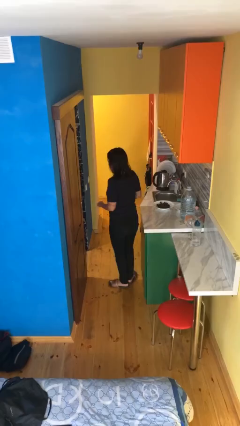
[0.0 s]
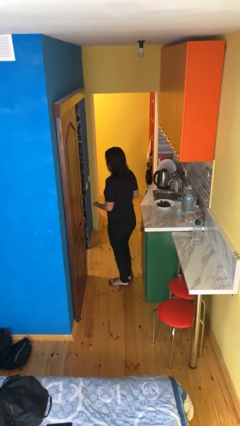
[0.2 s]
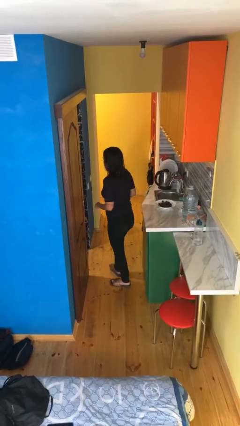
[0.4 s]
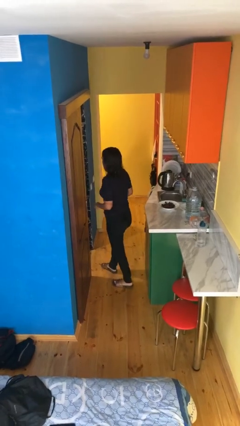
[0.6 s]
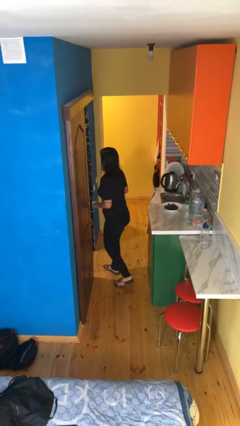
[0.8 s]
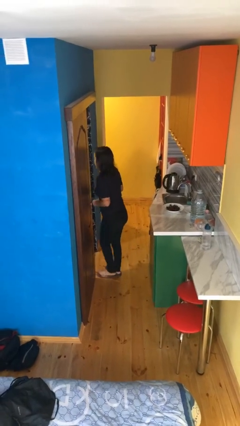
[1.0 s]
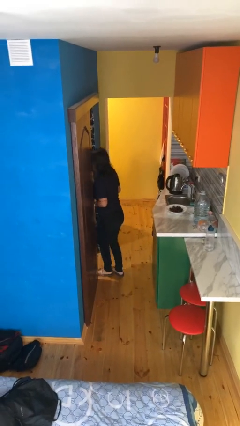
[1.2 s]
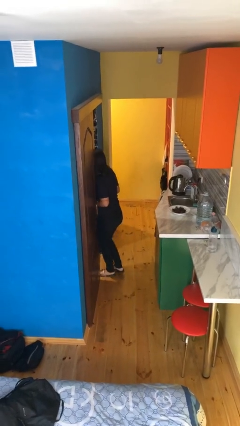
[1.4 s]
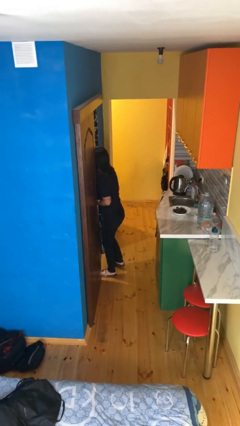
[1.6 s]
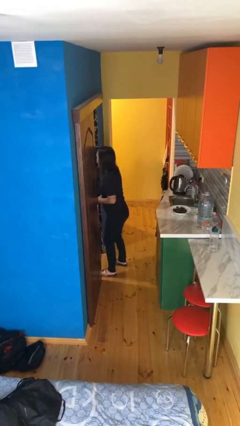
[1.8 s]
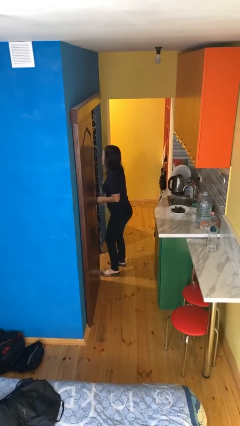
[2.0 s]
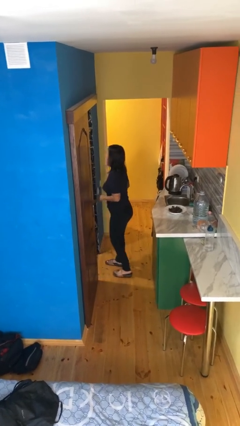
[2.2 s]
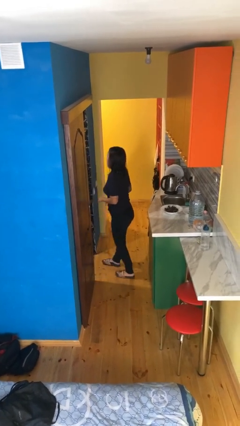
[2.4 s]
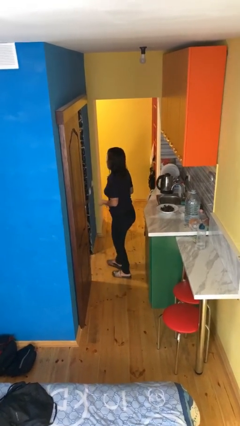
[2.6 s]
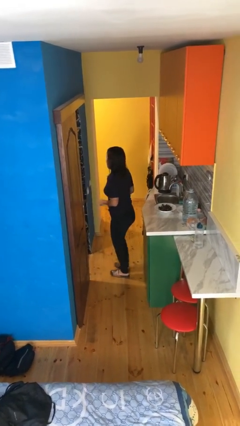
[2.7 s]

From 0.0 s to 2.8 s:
person bumps into wall

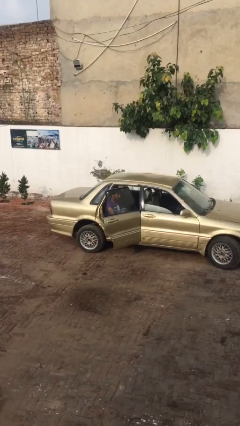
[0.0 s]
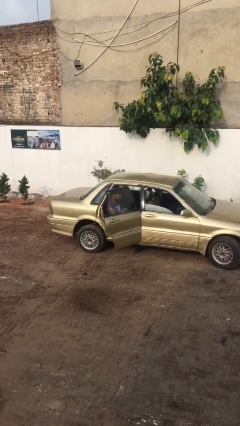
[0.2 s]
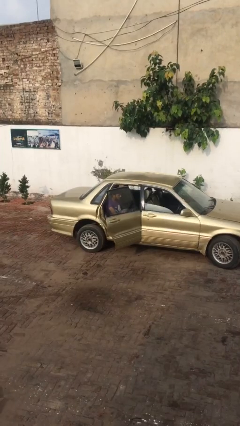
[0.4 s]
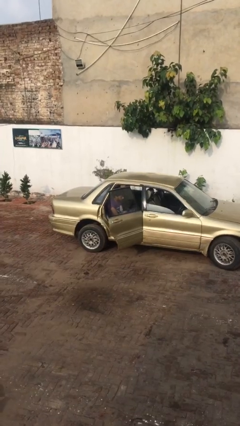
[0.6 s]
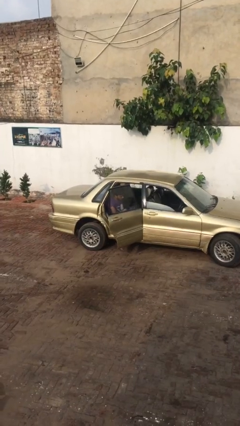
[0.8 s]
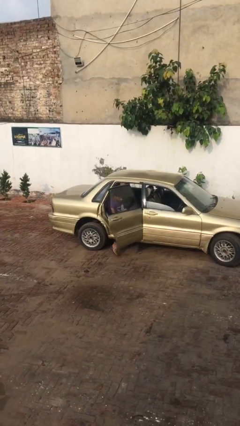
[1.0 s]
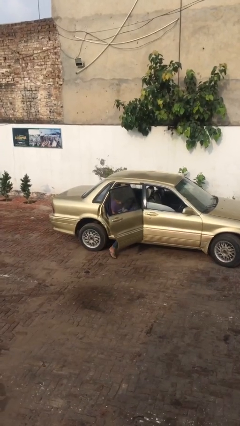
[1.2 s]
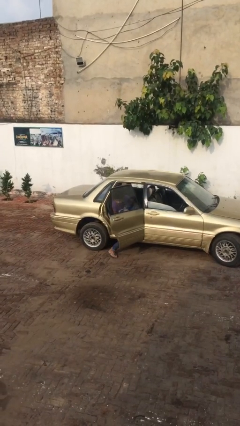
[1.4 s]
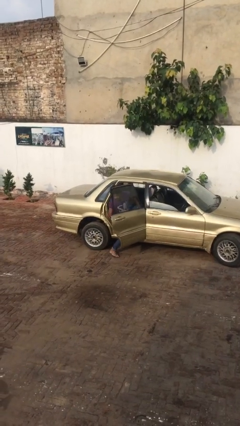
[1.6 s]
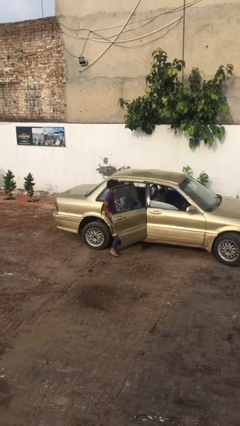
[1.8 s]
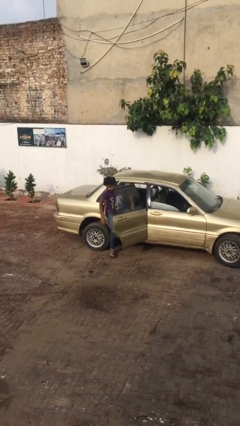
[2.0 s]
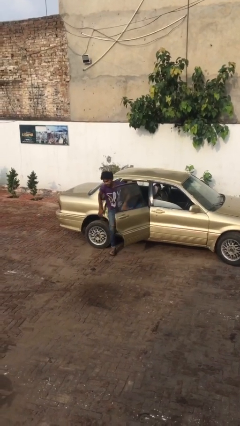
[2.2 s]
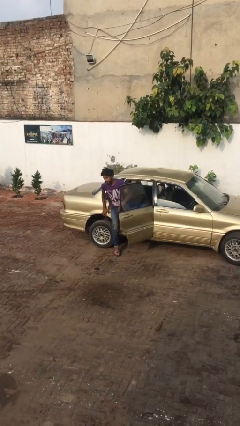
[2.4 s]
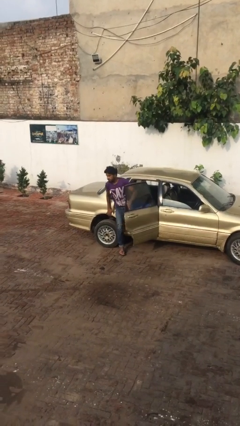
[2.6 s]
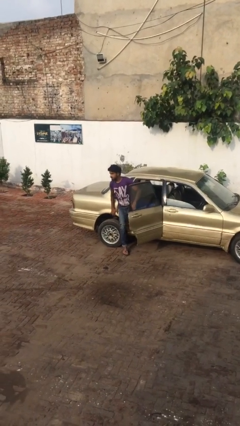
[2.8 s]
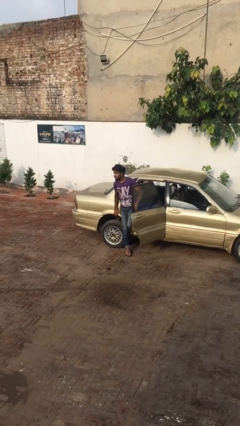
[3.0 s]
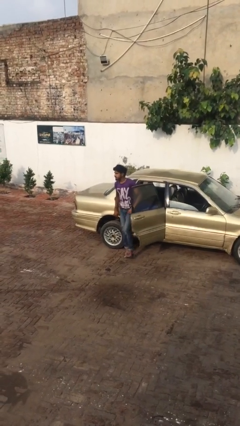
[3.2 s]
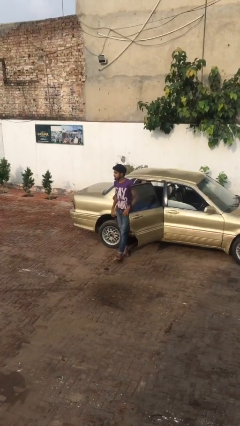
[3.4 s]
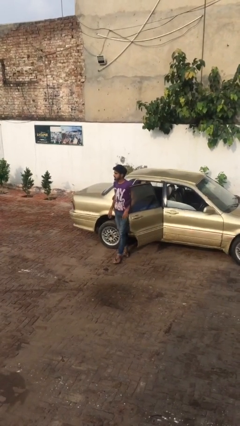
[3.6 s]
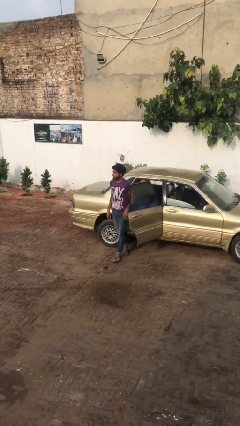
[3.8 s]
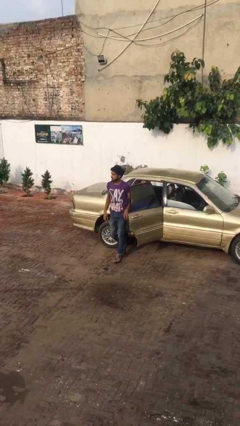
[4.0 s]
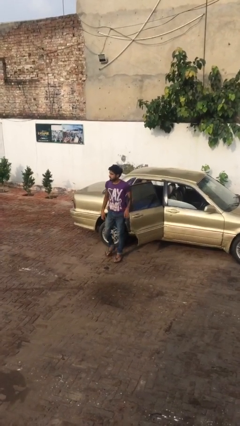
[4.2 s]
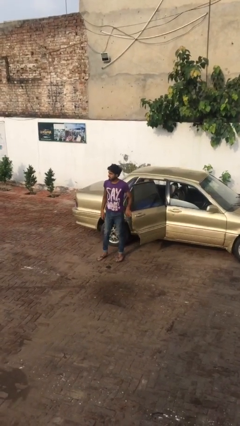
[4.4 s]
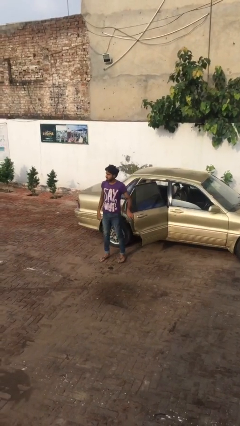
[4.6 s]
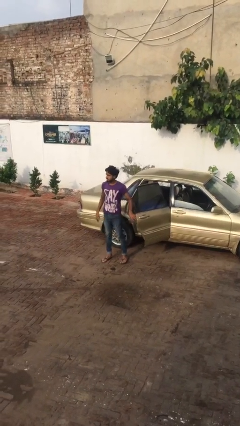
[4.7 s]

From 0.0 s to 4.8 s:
person exits car

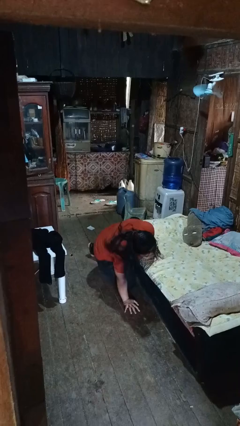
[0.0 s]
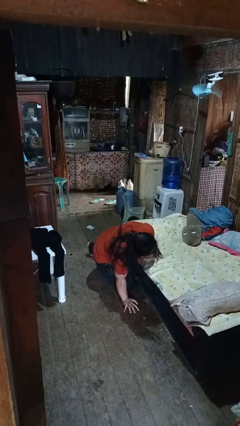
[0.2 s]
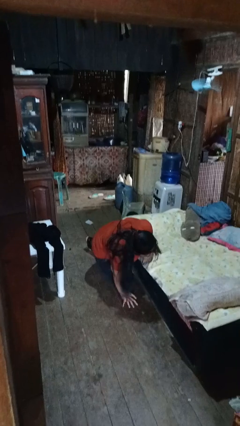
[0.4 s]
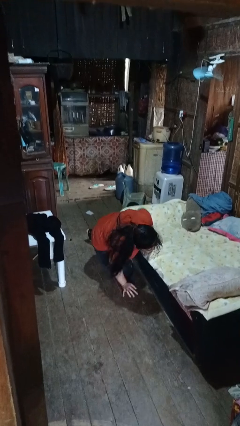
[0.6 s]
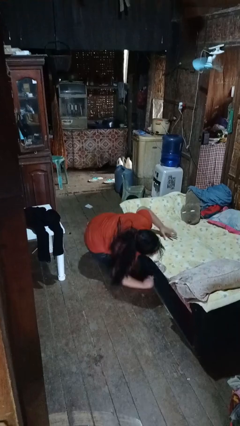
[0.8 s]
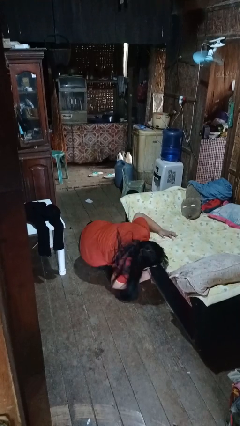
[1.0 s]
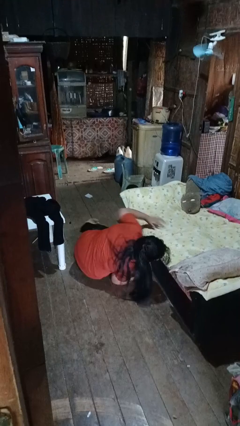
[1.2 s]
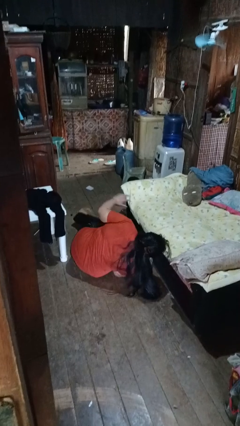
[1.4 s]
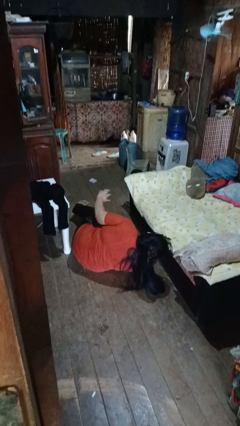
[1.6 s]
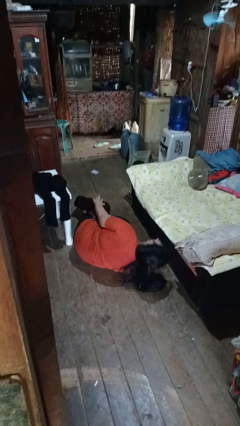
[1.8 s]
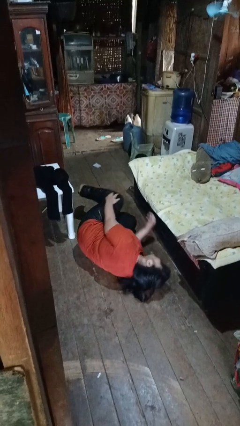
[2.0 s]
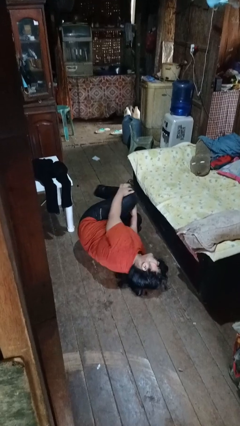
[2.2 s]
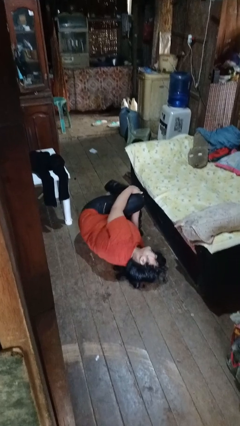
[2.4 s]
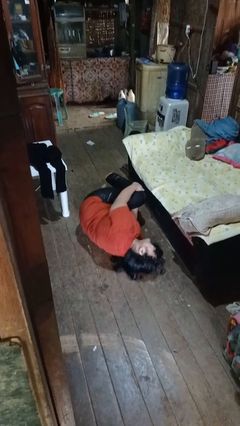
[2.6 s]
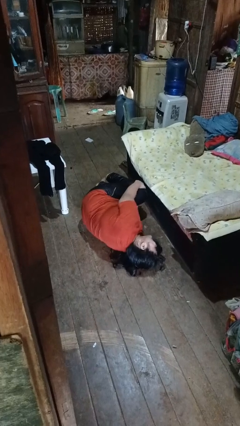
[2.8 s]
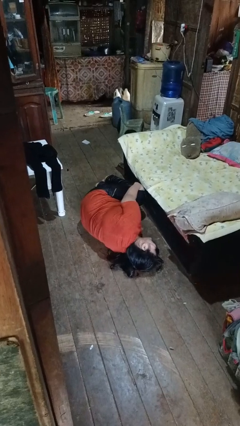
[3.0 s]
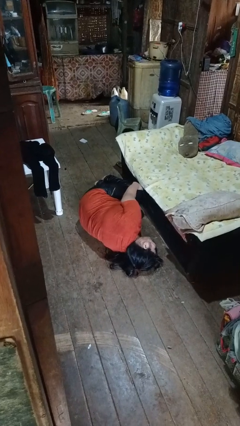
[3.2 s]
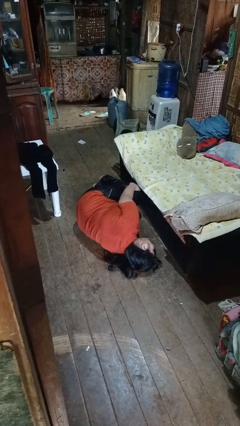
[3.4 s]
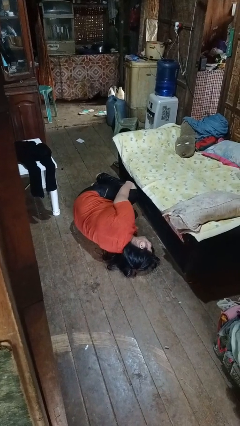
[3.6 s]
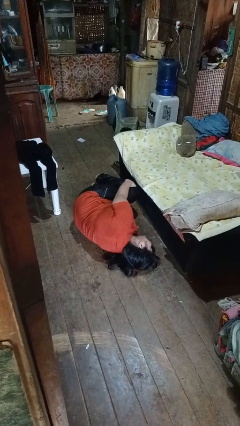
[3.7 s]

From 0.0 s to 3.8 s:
person lies down on floor

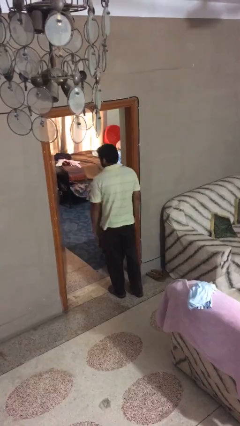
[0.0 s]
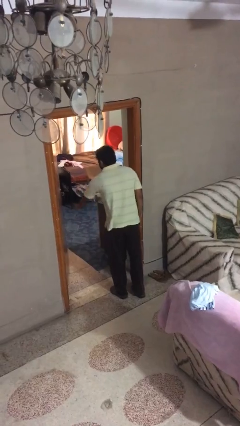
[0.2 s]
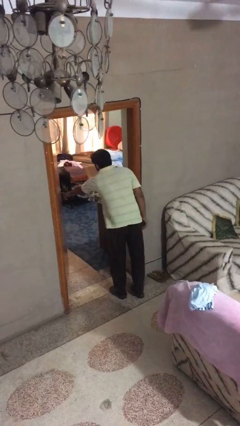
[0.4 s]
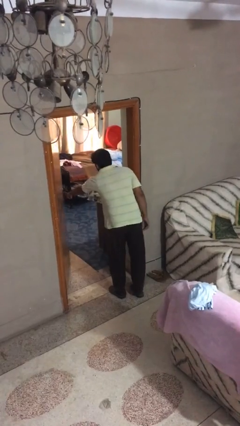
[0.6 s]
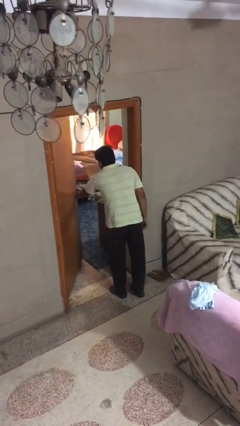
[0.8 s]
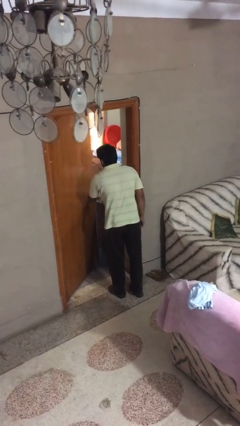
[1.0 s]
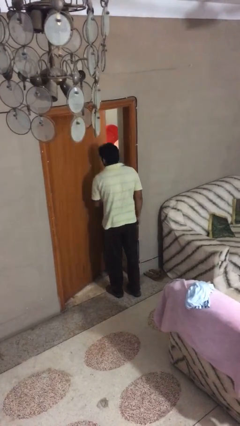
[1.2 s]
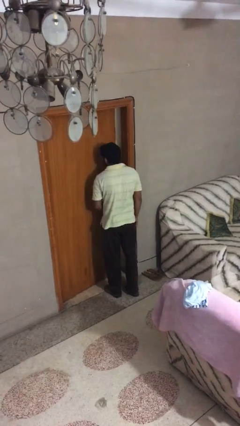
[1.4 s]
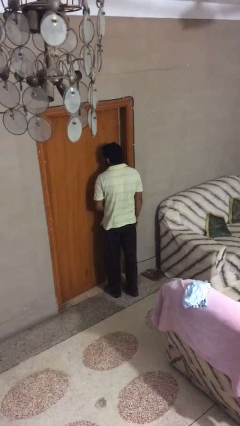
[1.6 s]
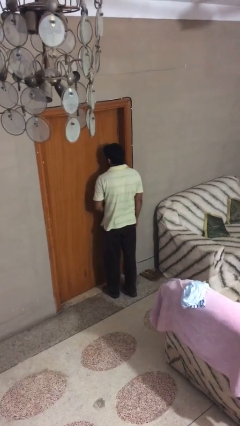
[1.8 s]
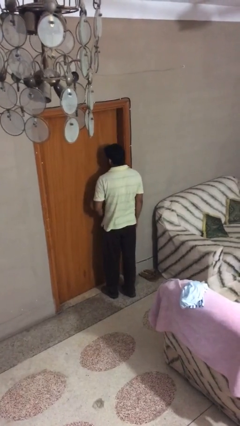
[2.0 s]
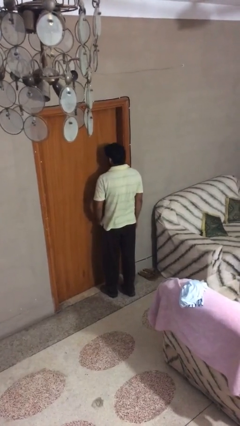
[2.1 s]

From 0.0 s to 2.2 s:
person closes facility door

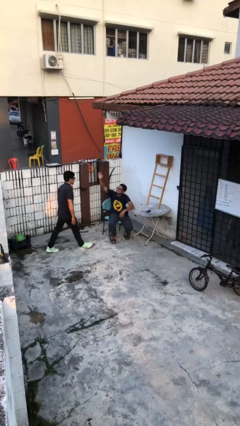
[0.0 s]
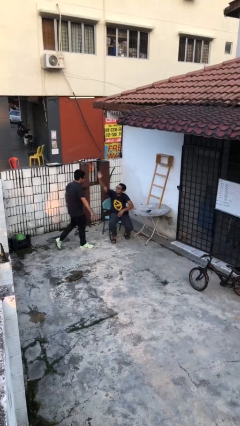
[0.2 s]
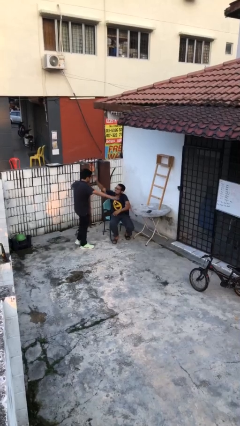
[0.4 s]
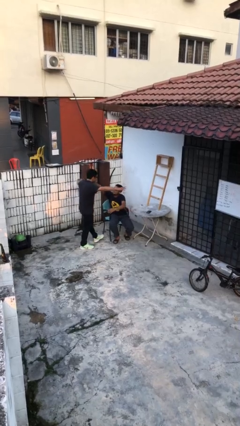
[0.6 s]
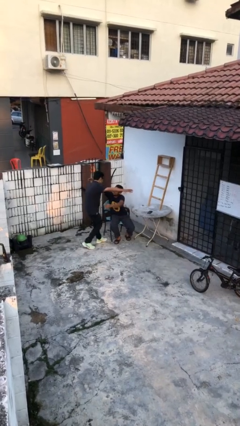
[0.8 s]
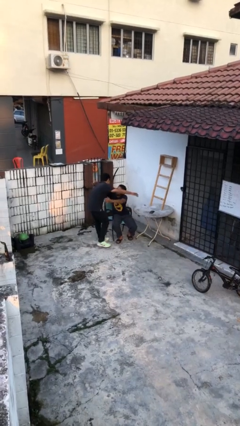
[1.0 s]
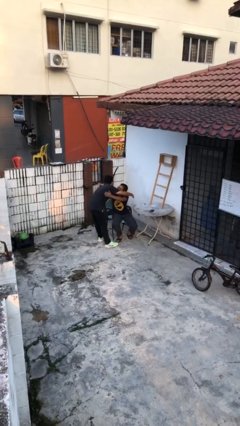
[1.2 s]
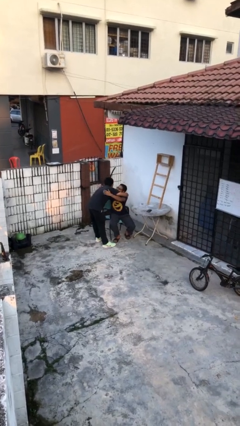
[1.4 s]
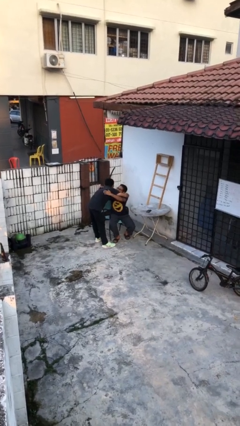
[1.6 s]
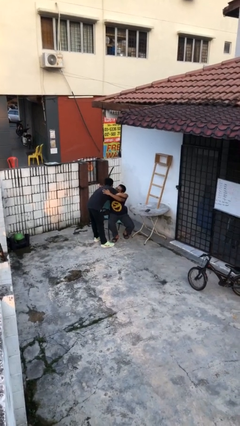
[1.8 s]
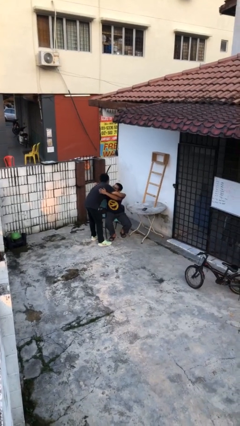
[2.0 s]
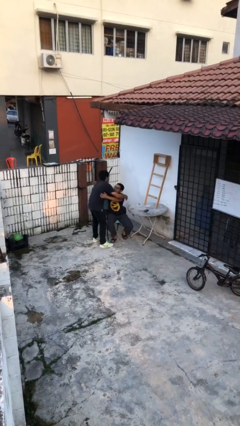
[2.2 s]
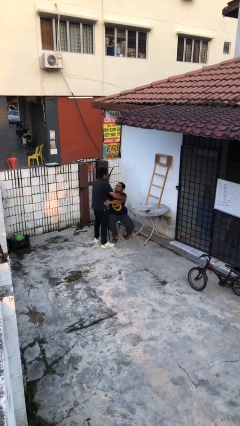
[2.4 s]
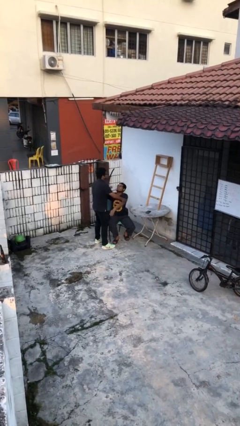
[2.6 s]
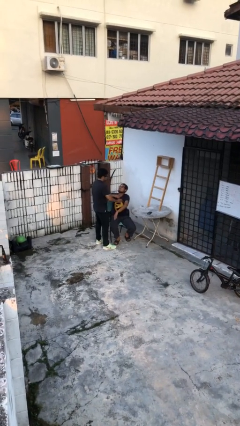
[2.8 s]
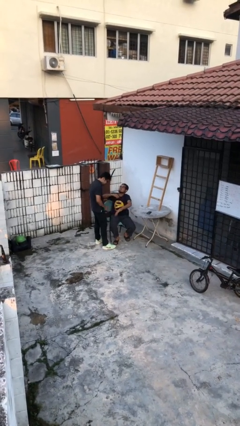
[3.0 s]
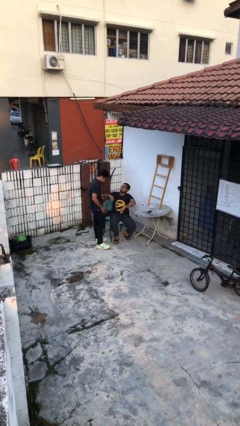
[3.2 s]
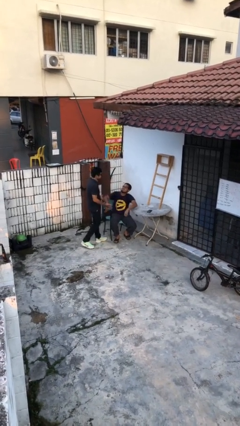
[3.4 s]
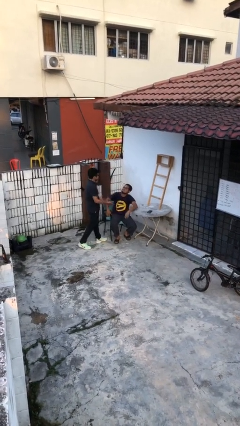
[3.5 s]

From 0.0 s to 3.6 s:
person embraces person
